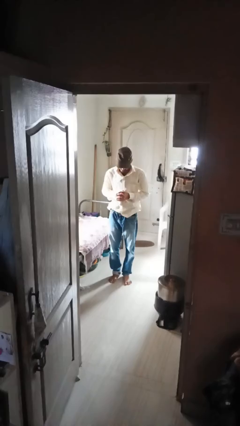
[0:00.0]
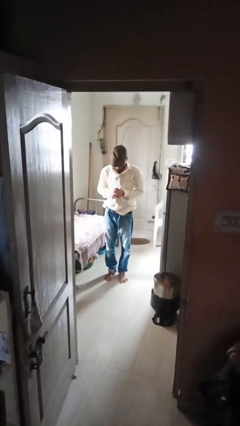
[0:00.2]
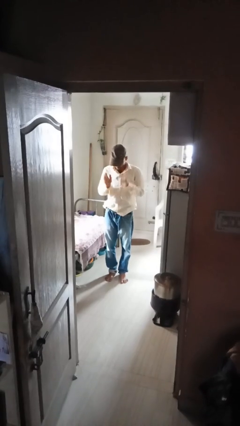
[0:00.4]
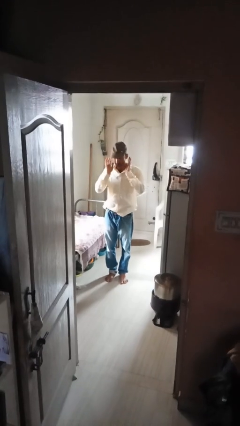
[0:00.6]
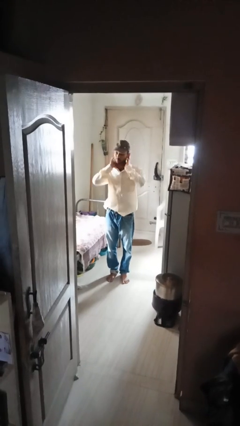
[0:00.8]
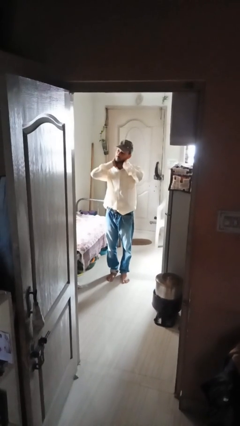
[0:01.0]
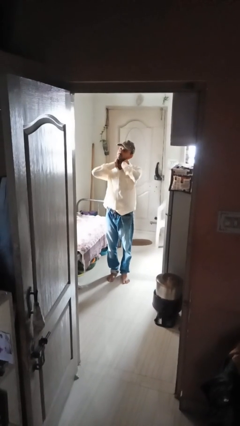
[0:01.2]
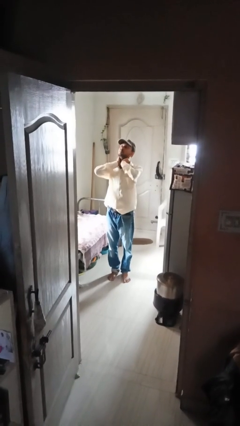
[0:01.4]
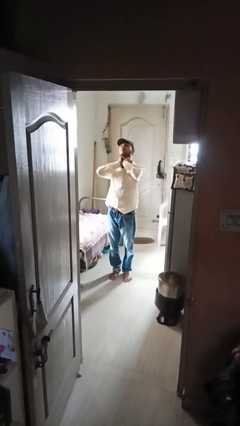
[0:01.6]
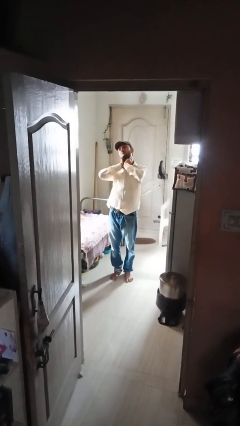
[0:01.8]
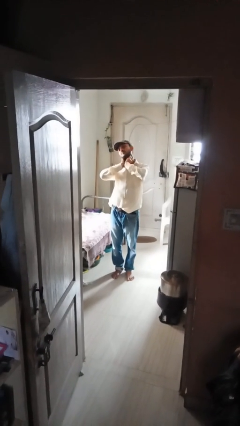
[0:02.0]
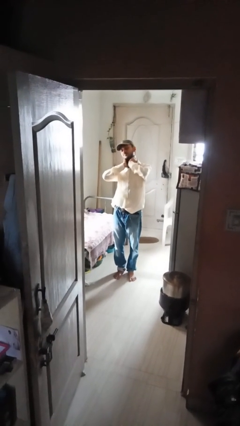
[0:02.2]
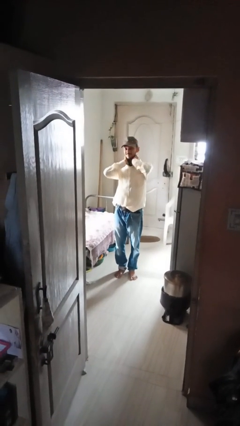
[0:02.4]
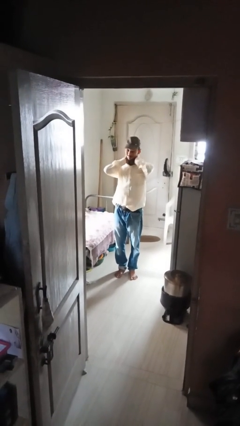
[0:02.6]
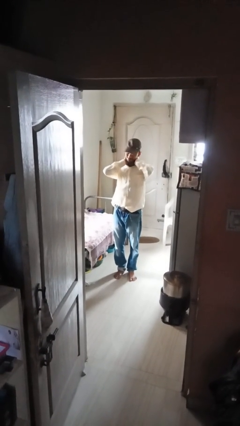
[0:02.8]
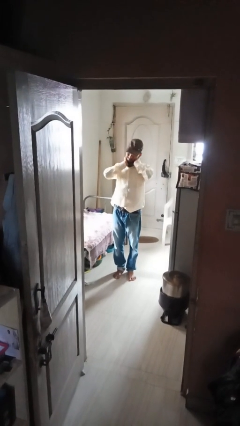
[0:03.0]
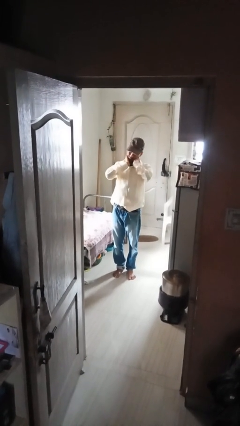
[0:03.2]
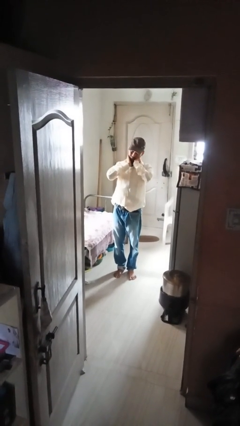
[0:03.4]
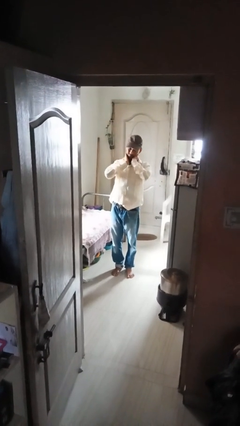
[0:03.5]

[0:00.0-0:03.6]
person rubs neck

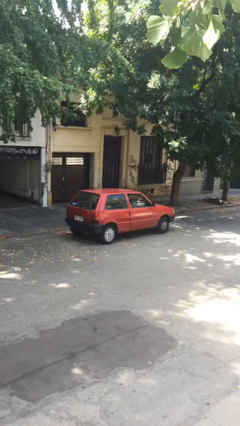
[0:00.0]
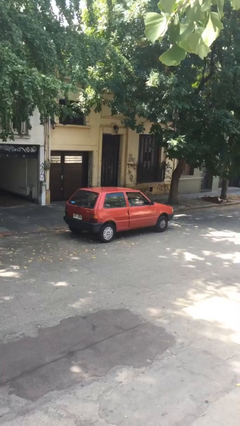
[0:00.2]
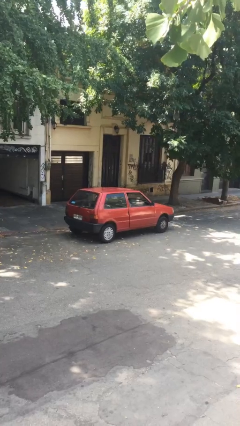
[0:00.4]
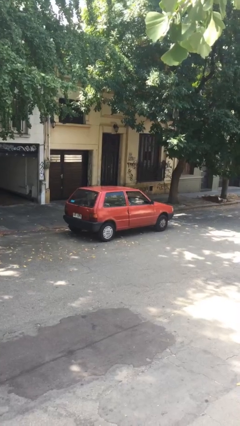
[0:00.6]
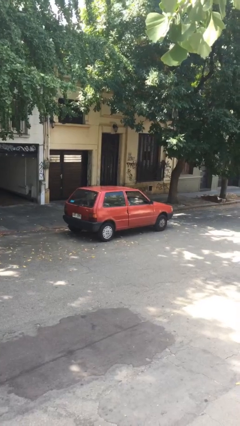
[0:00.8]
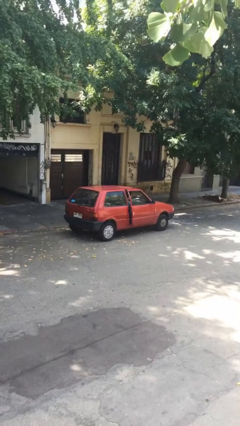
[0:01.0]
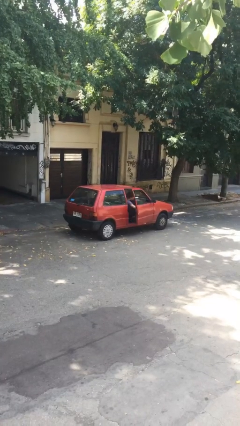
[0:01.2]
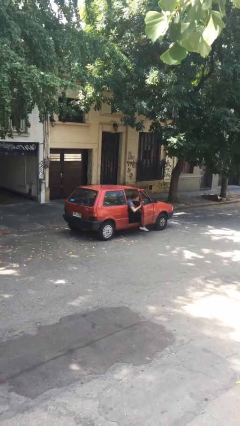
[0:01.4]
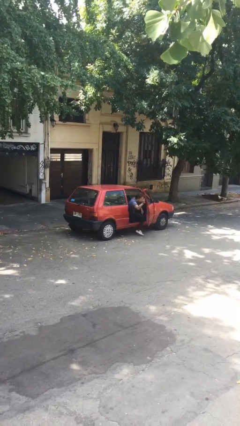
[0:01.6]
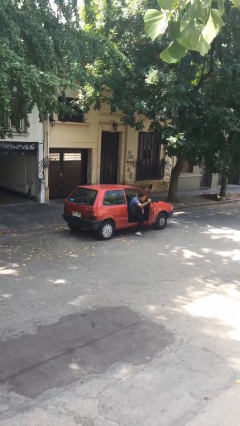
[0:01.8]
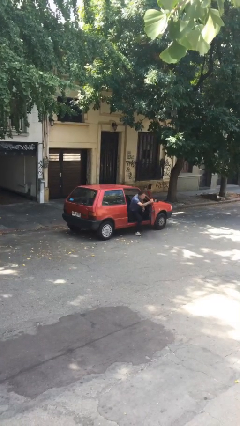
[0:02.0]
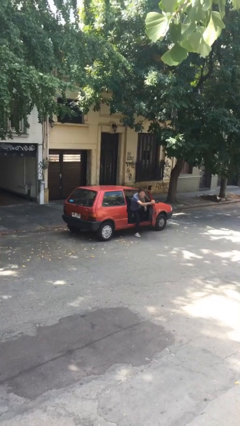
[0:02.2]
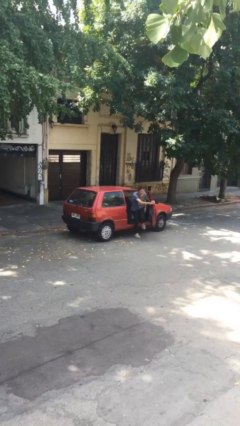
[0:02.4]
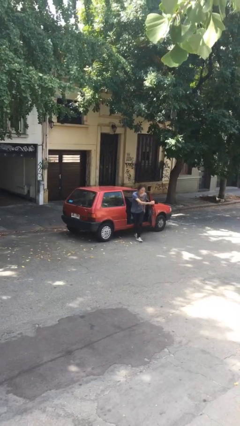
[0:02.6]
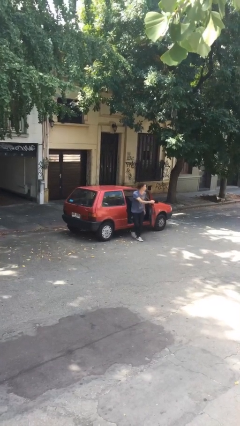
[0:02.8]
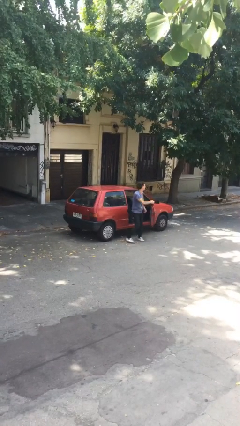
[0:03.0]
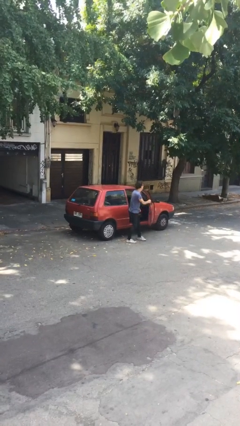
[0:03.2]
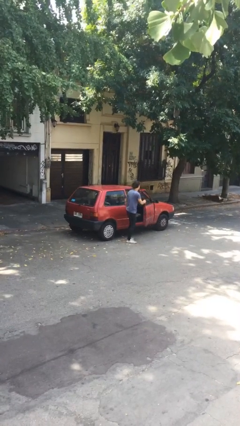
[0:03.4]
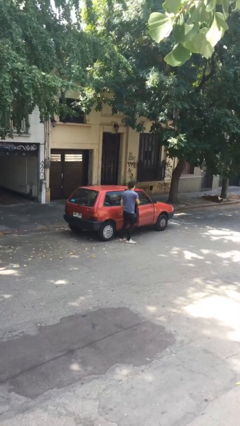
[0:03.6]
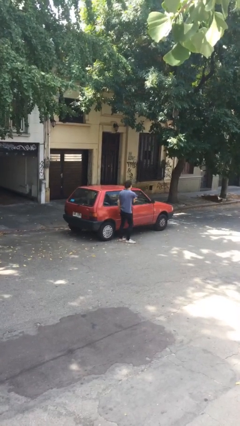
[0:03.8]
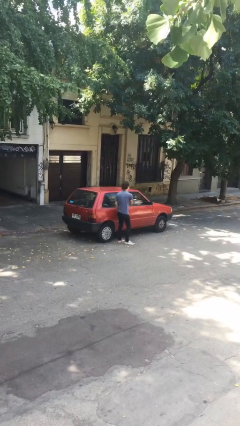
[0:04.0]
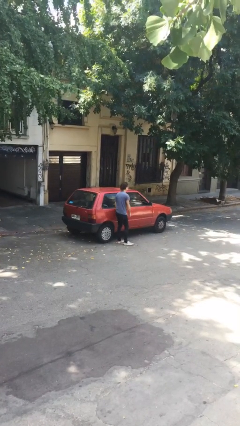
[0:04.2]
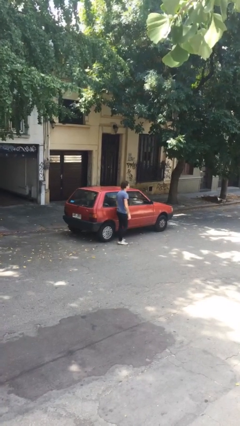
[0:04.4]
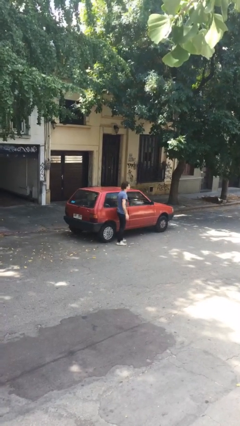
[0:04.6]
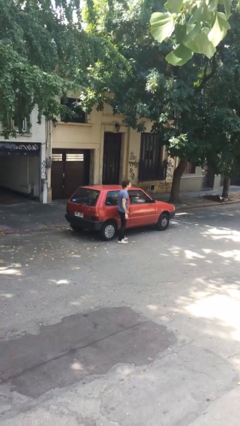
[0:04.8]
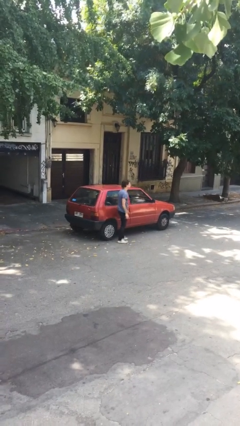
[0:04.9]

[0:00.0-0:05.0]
car drops off person

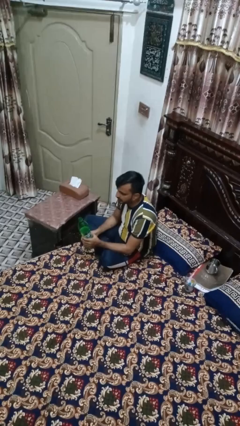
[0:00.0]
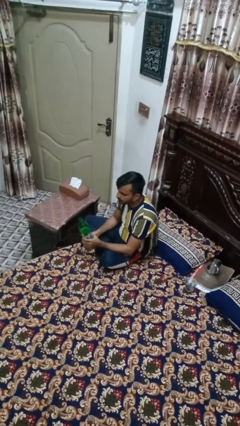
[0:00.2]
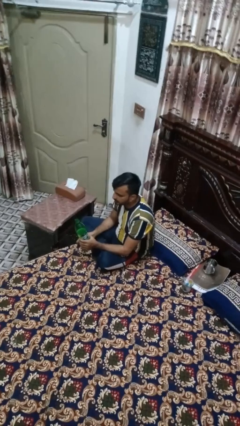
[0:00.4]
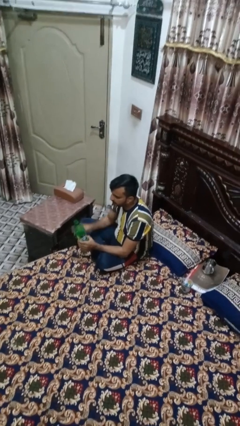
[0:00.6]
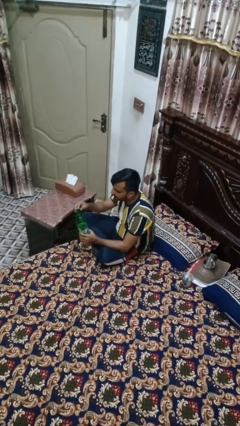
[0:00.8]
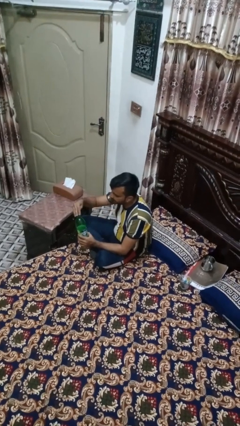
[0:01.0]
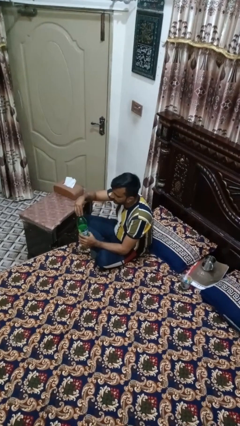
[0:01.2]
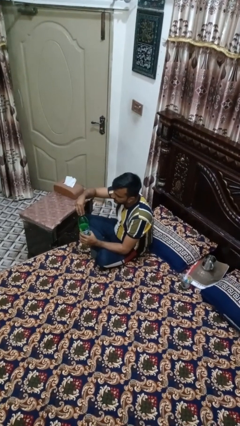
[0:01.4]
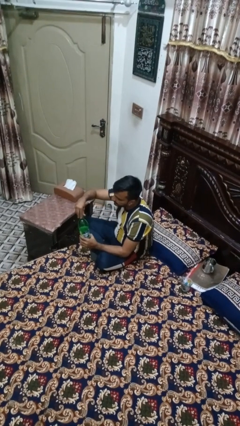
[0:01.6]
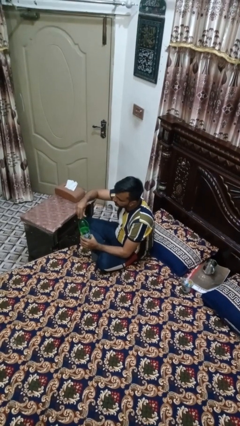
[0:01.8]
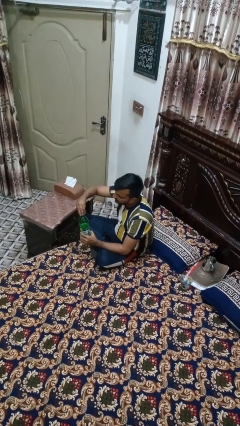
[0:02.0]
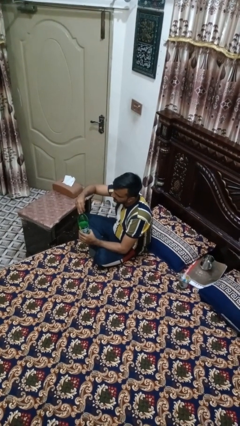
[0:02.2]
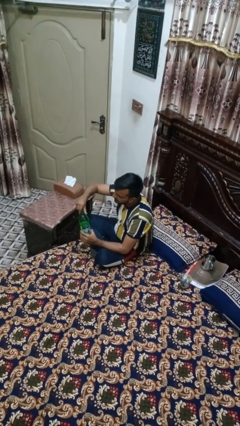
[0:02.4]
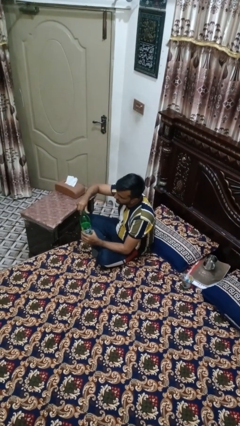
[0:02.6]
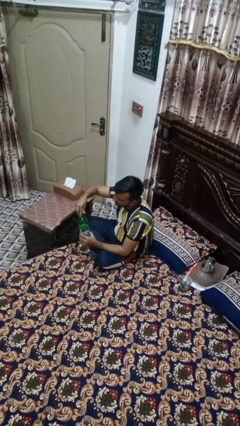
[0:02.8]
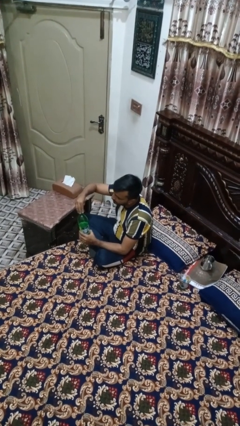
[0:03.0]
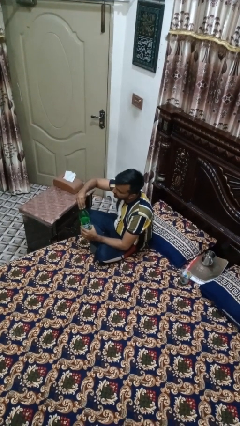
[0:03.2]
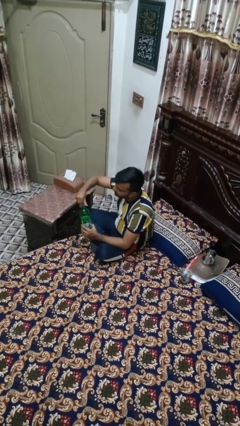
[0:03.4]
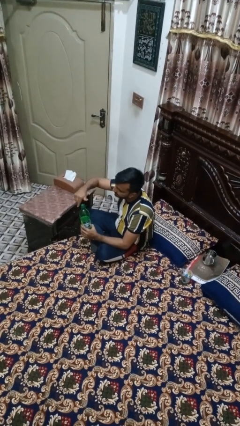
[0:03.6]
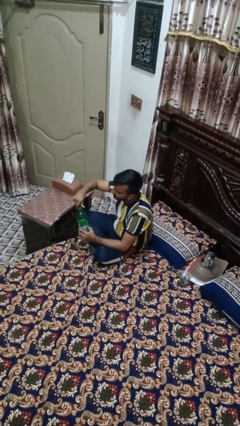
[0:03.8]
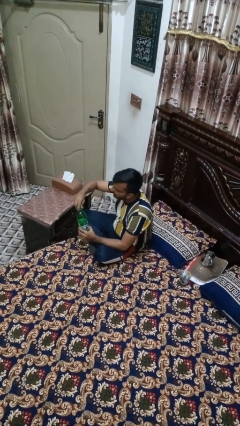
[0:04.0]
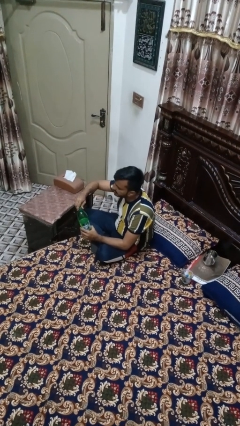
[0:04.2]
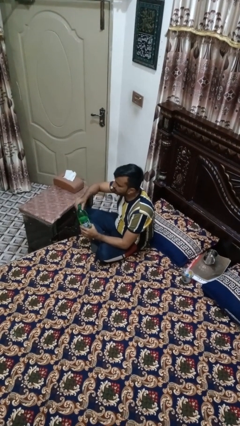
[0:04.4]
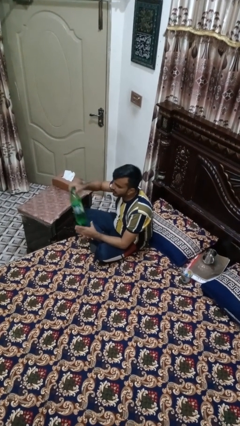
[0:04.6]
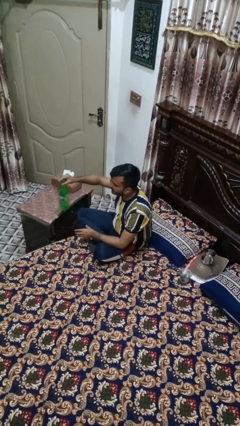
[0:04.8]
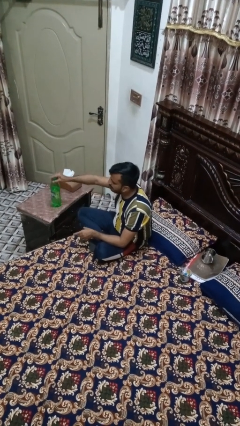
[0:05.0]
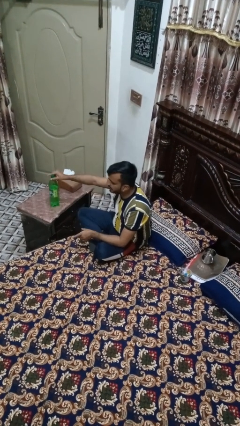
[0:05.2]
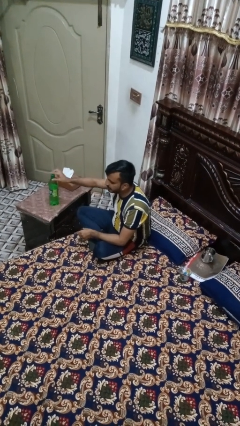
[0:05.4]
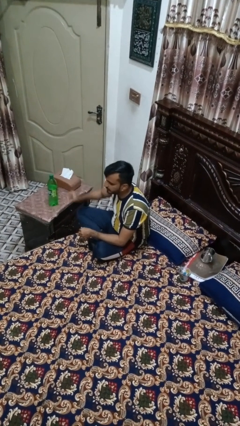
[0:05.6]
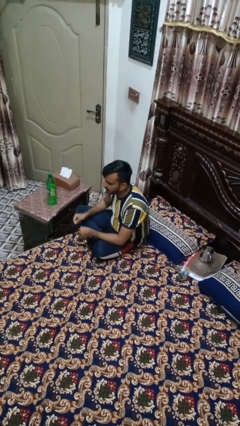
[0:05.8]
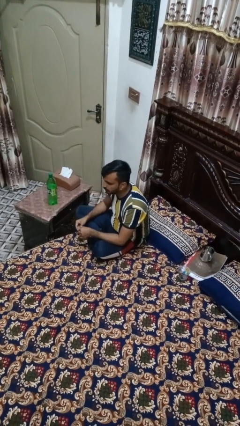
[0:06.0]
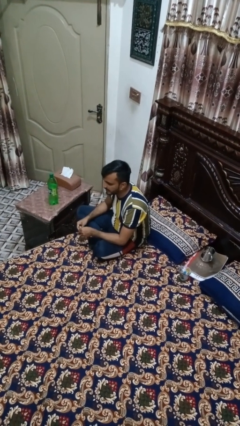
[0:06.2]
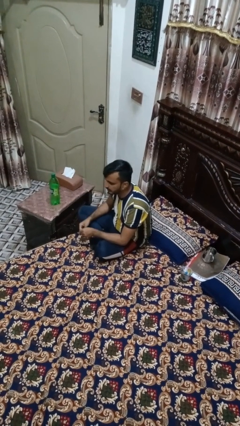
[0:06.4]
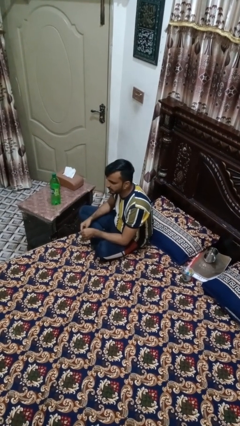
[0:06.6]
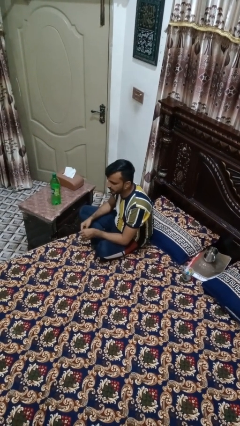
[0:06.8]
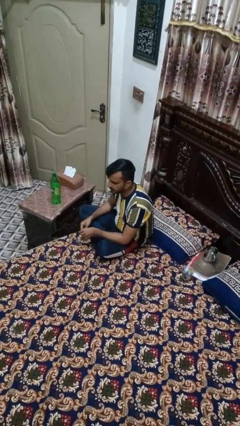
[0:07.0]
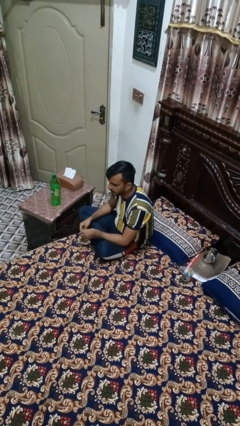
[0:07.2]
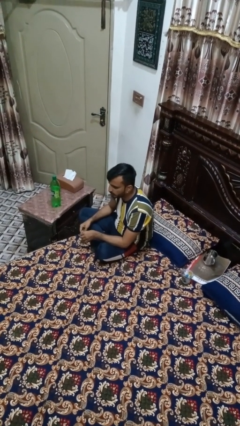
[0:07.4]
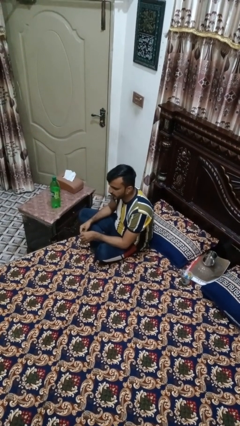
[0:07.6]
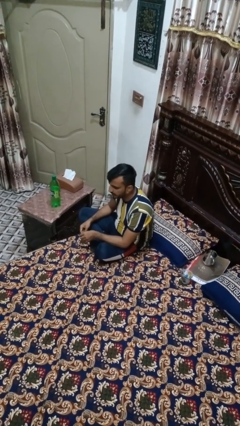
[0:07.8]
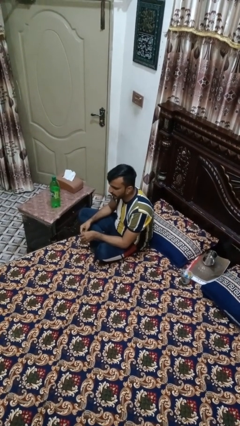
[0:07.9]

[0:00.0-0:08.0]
person screws lid to bottle

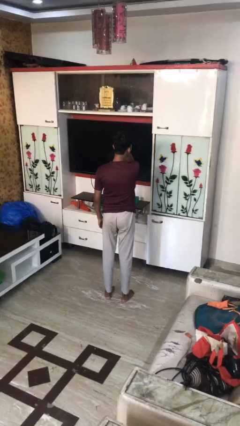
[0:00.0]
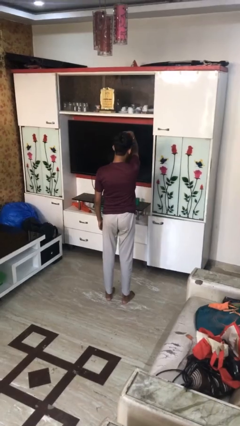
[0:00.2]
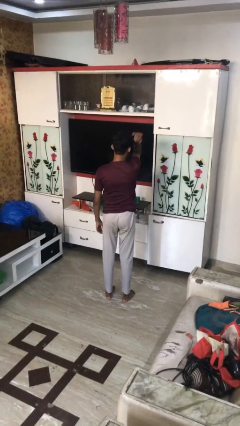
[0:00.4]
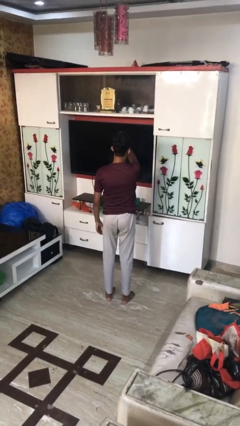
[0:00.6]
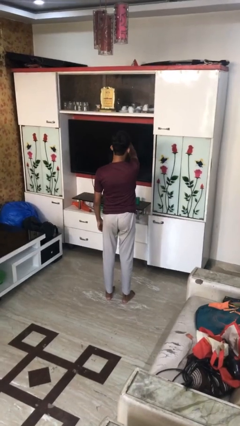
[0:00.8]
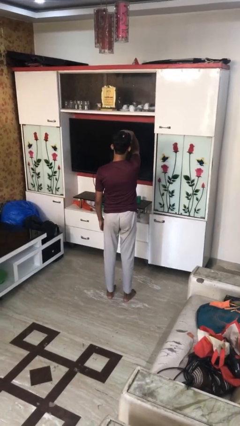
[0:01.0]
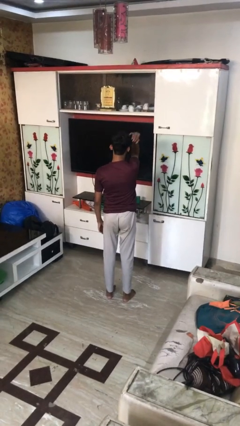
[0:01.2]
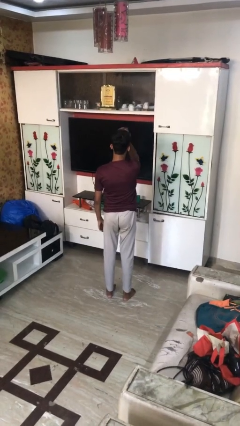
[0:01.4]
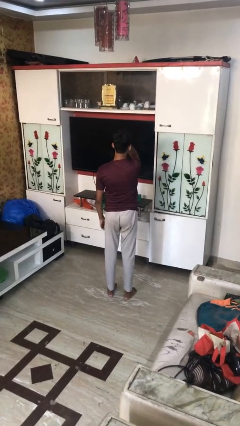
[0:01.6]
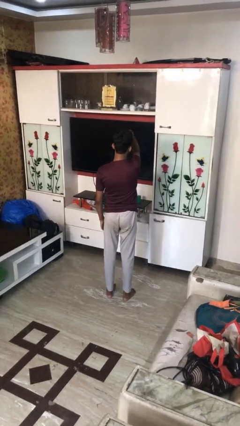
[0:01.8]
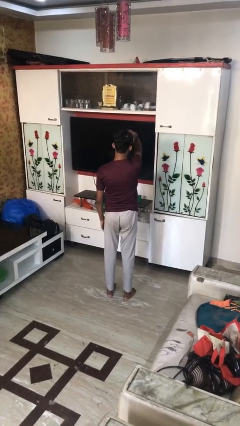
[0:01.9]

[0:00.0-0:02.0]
person strokes hair
